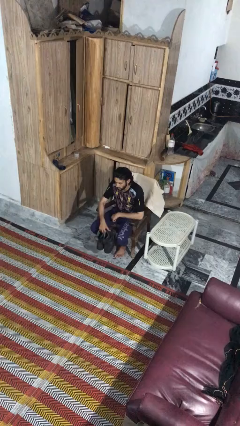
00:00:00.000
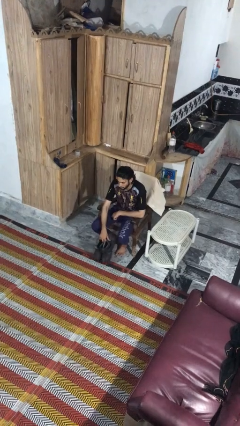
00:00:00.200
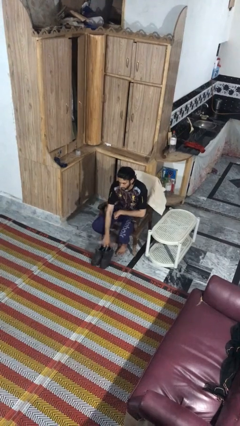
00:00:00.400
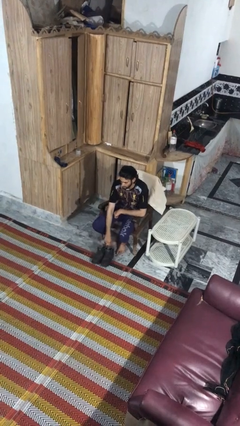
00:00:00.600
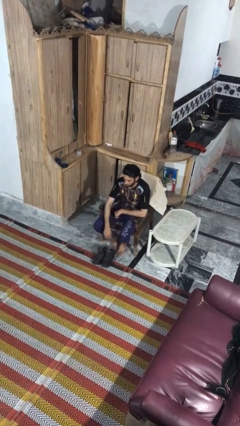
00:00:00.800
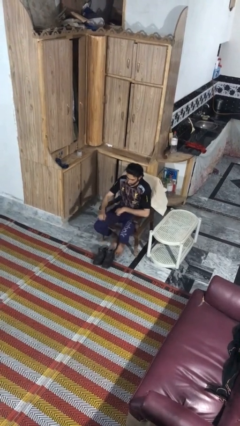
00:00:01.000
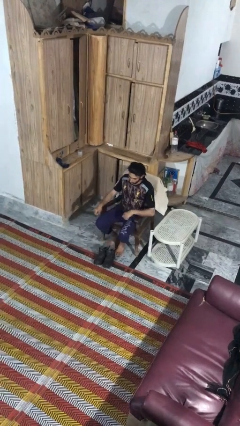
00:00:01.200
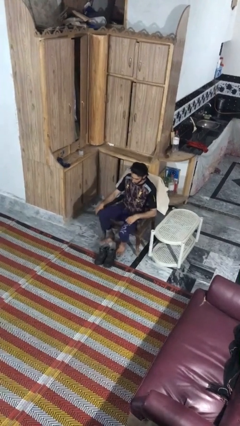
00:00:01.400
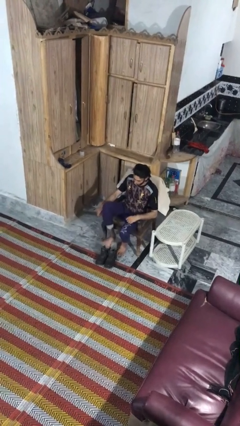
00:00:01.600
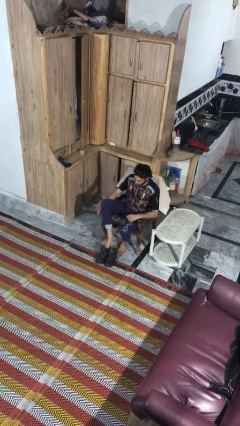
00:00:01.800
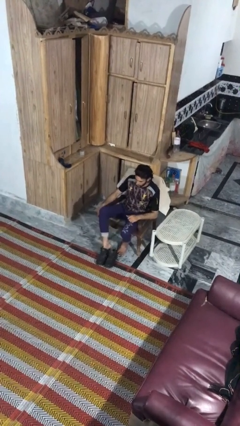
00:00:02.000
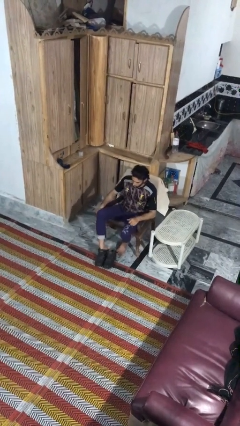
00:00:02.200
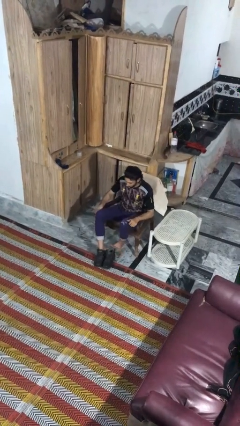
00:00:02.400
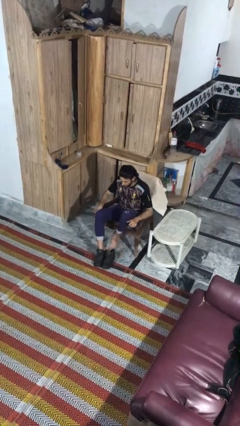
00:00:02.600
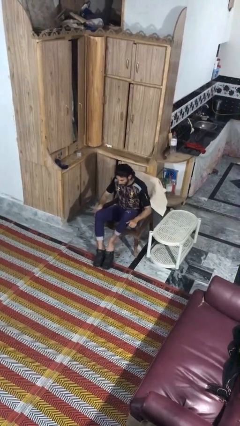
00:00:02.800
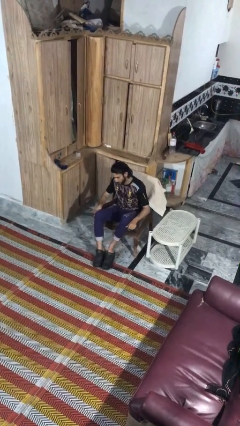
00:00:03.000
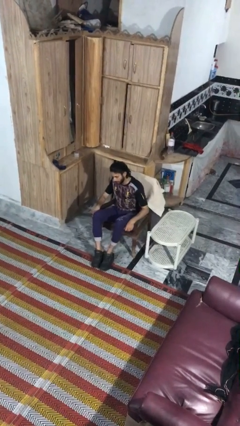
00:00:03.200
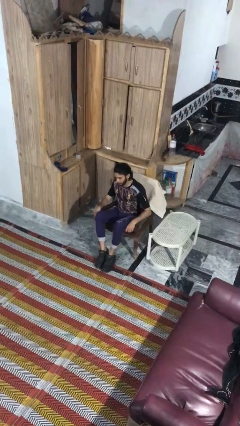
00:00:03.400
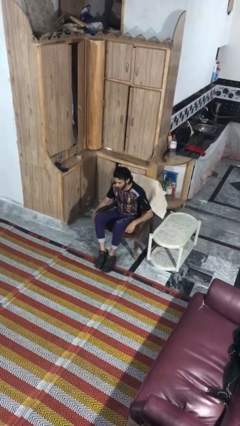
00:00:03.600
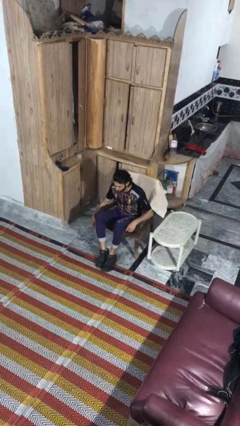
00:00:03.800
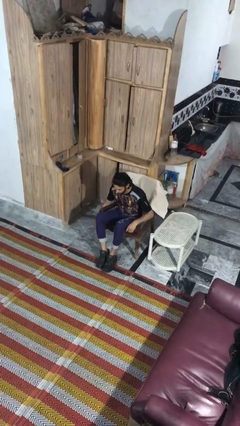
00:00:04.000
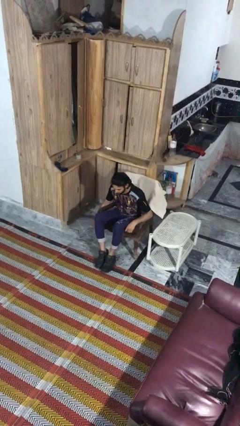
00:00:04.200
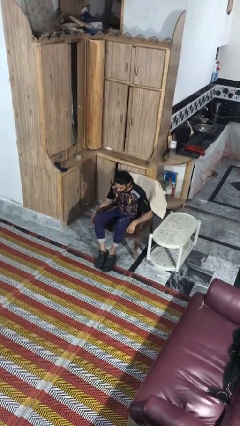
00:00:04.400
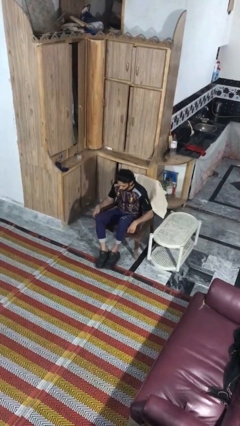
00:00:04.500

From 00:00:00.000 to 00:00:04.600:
person puts on boots

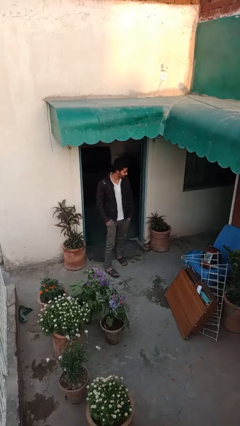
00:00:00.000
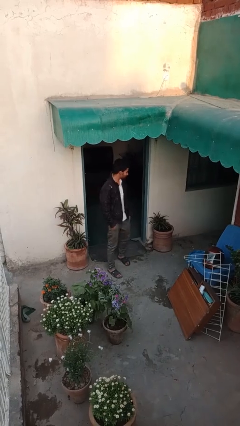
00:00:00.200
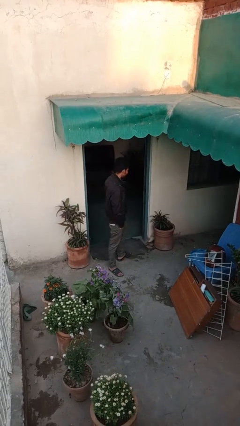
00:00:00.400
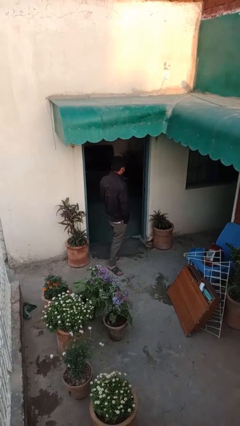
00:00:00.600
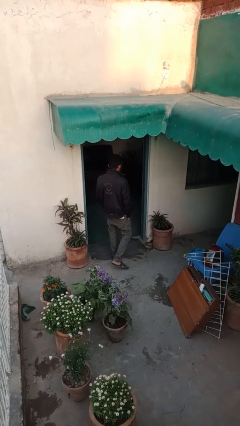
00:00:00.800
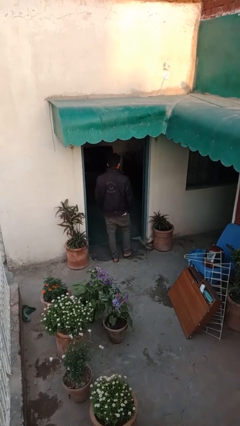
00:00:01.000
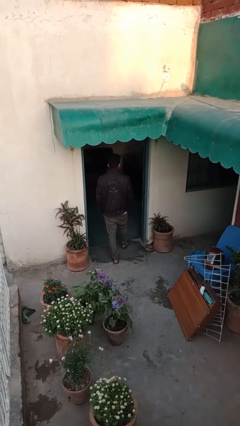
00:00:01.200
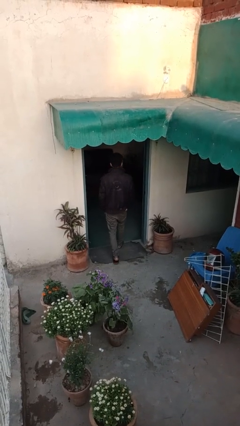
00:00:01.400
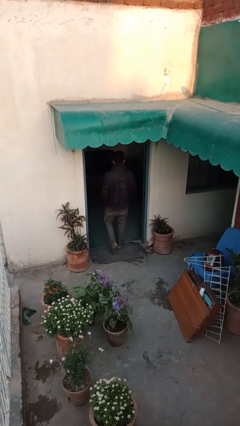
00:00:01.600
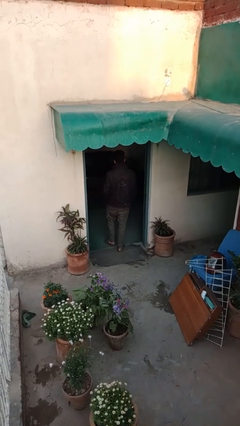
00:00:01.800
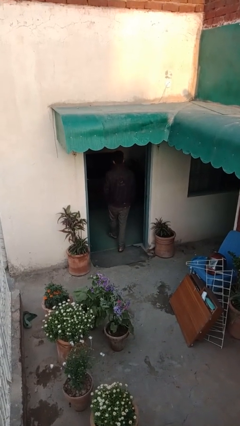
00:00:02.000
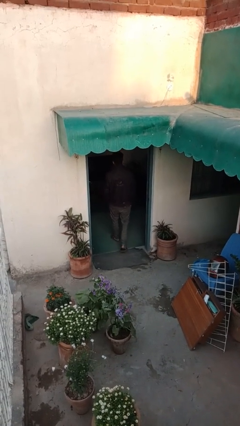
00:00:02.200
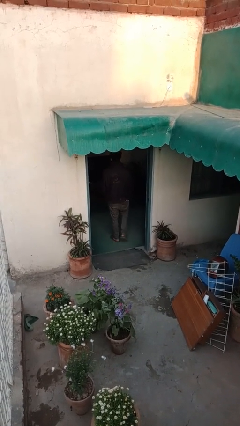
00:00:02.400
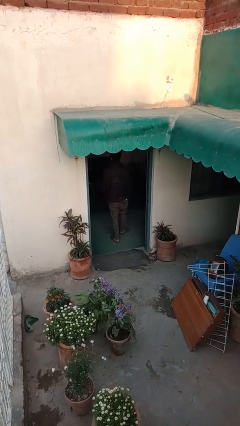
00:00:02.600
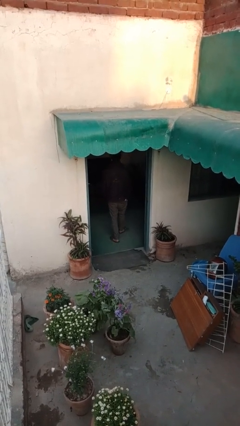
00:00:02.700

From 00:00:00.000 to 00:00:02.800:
person exits scene through structure

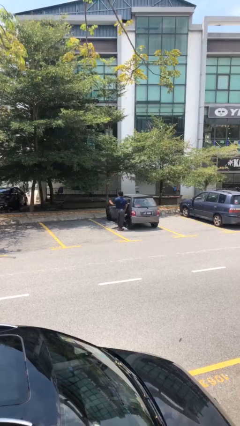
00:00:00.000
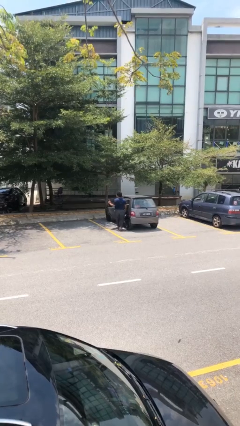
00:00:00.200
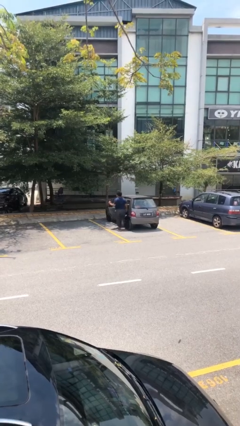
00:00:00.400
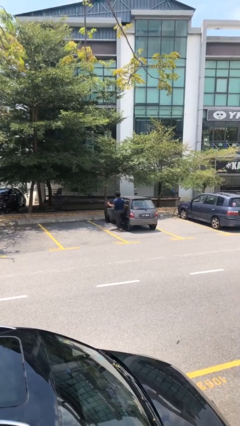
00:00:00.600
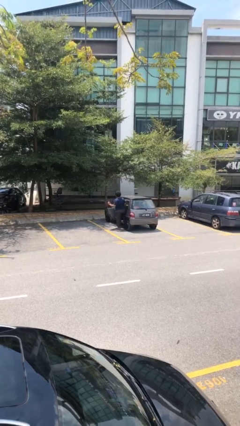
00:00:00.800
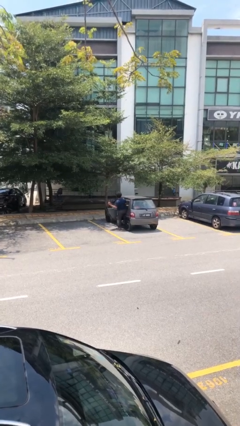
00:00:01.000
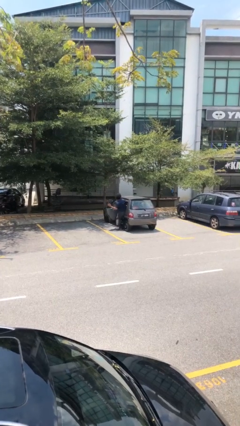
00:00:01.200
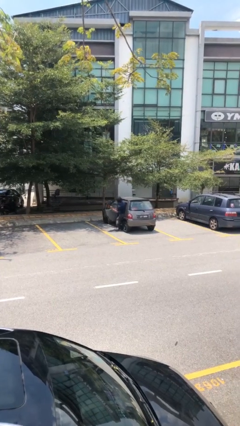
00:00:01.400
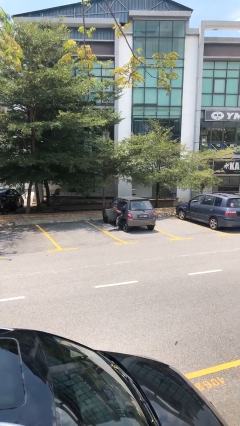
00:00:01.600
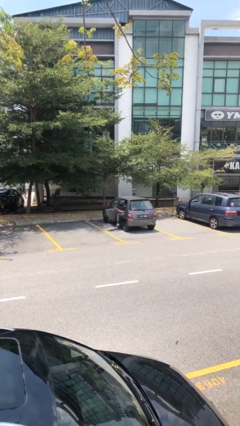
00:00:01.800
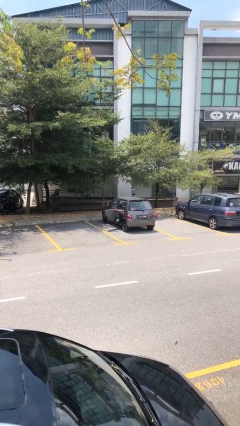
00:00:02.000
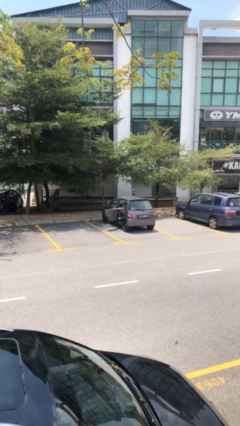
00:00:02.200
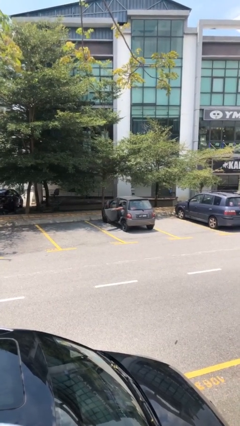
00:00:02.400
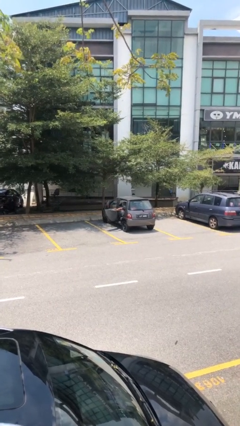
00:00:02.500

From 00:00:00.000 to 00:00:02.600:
person enters car

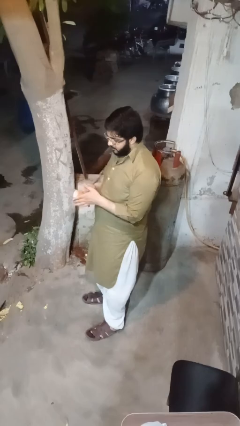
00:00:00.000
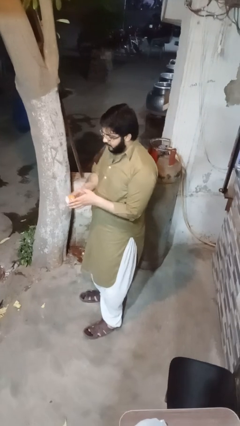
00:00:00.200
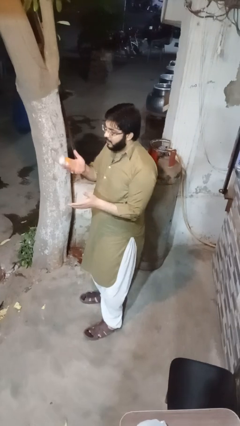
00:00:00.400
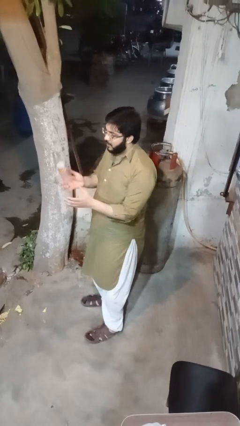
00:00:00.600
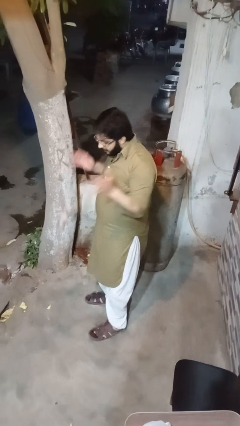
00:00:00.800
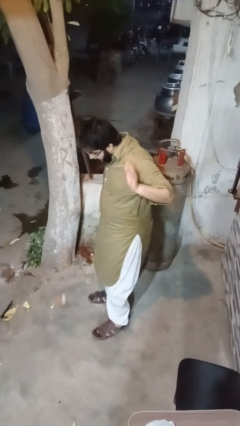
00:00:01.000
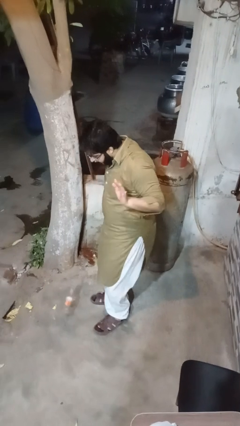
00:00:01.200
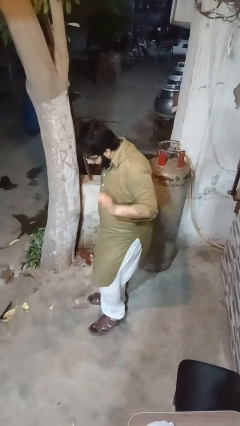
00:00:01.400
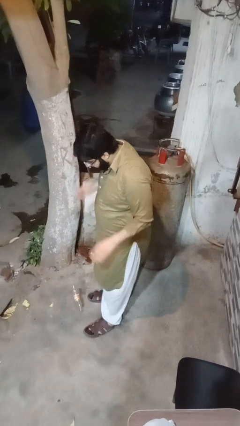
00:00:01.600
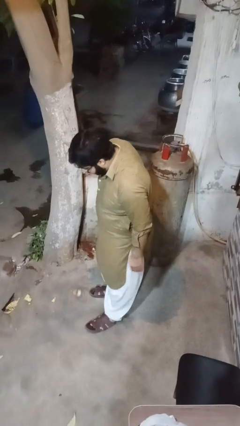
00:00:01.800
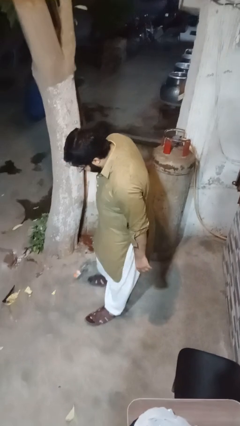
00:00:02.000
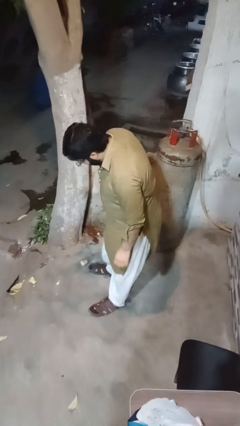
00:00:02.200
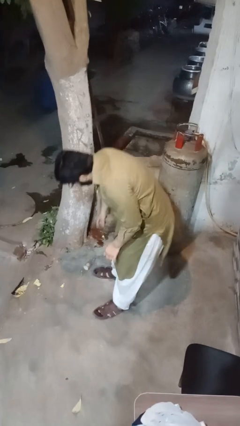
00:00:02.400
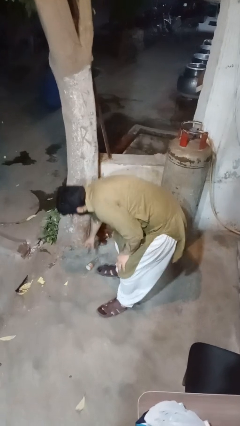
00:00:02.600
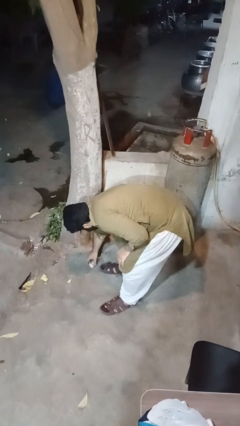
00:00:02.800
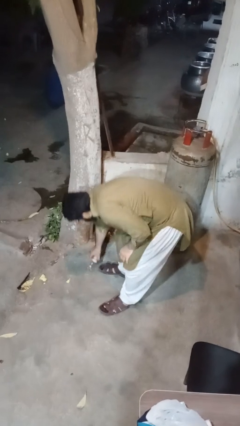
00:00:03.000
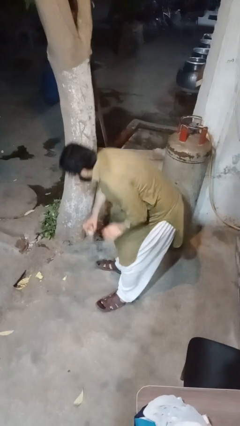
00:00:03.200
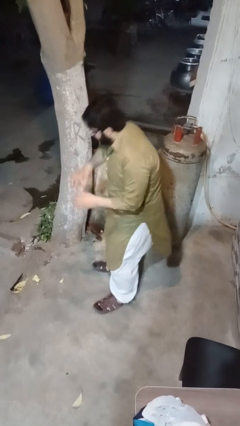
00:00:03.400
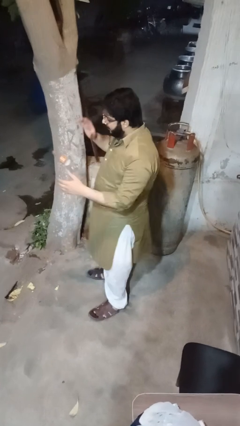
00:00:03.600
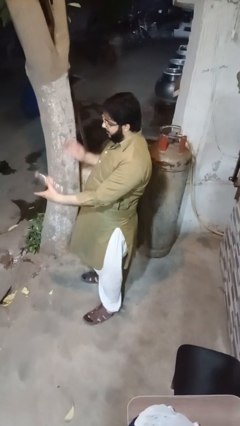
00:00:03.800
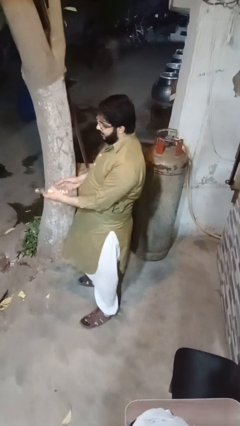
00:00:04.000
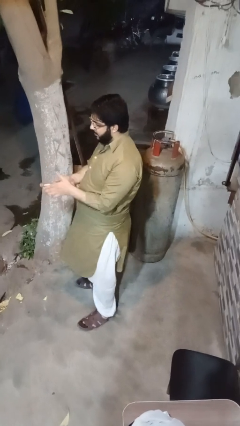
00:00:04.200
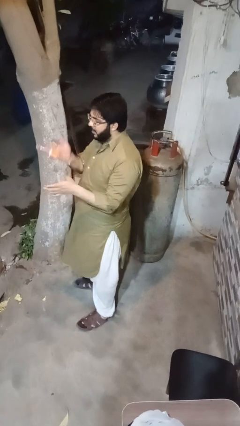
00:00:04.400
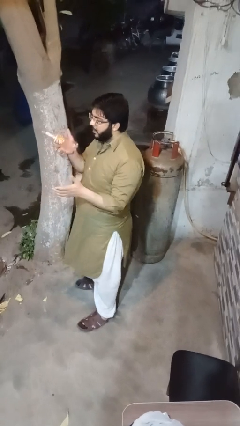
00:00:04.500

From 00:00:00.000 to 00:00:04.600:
person drops object

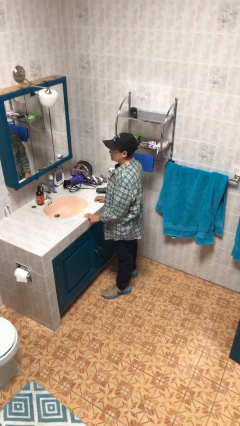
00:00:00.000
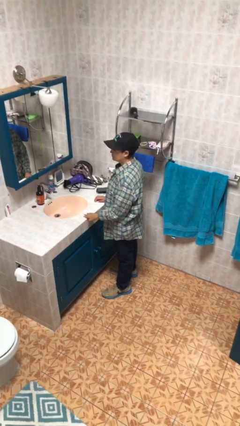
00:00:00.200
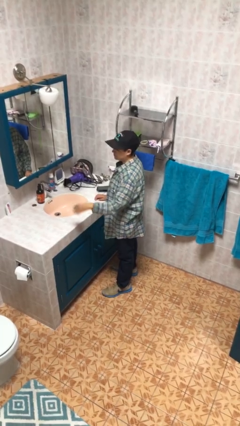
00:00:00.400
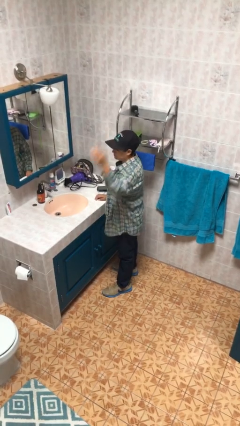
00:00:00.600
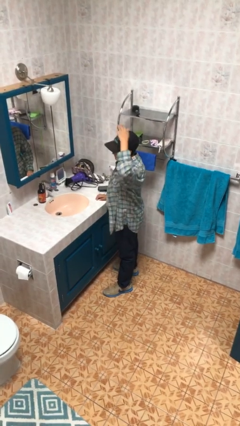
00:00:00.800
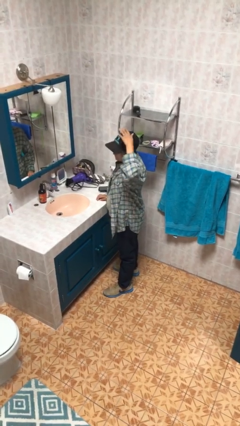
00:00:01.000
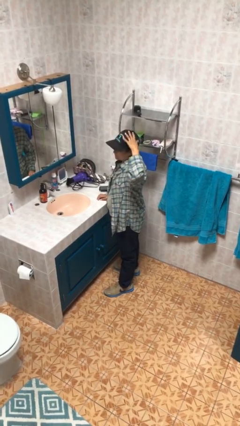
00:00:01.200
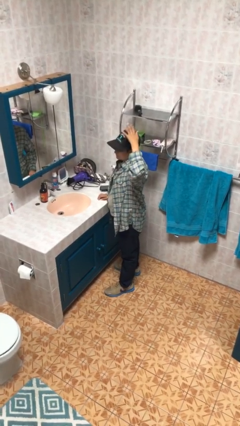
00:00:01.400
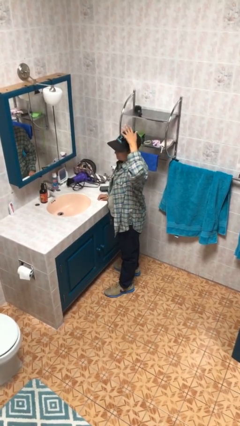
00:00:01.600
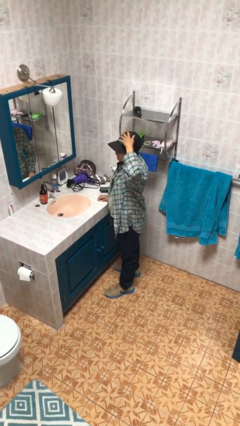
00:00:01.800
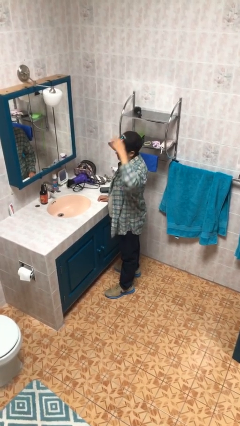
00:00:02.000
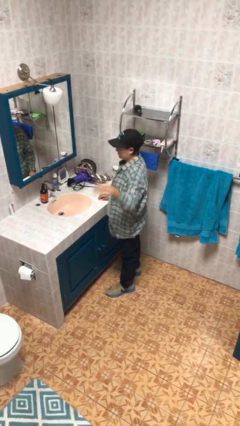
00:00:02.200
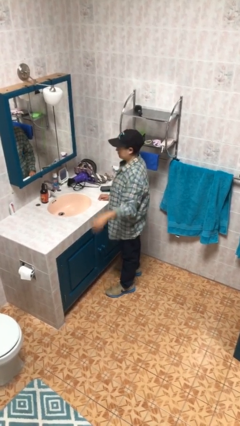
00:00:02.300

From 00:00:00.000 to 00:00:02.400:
person pats head

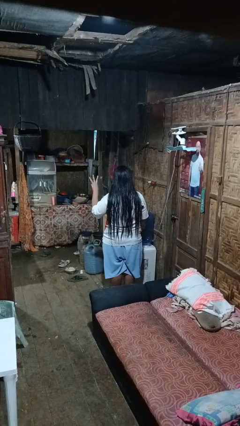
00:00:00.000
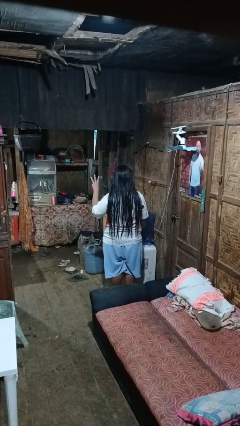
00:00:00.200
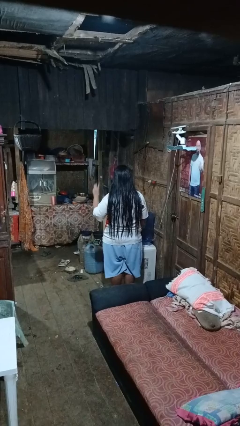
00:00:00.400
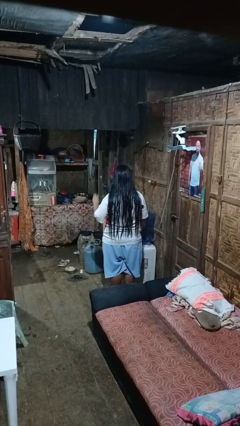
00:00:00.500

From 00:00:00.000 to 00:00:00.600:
person gestures number three
